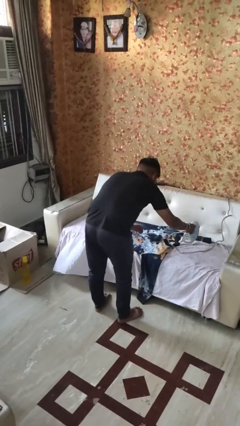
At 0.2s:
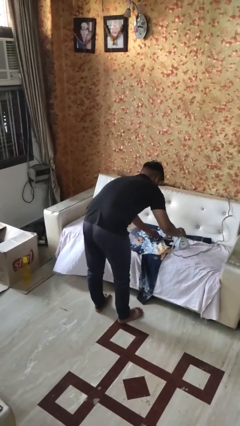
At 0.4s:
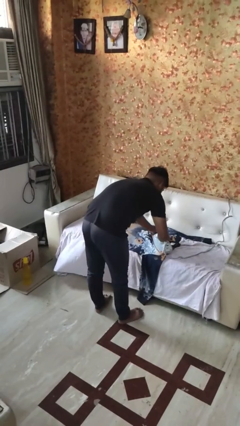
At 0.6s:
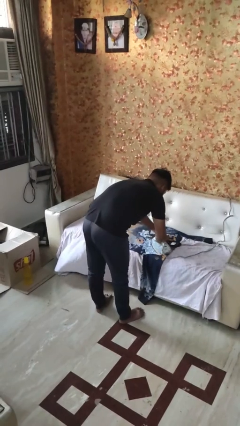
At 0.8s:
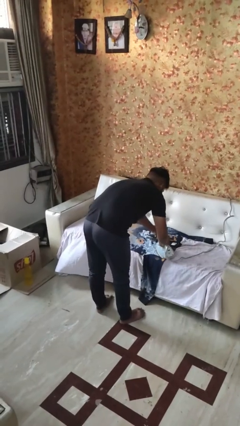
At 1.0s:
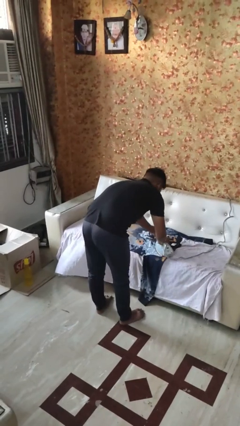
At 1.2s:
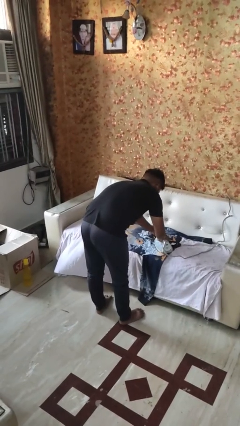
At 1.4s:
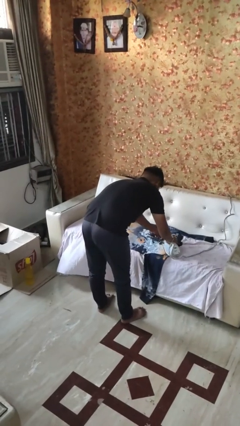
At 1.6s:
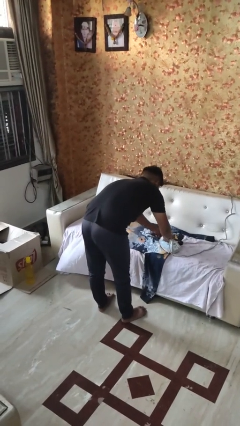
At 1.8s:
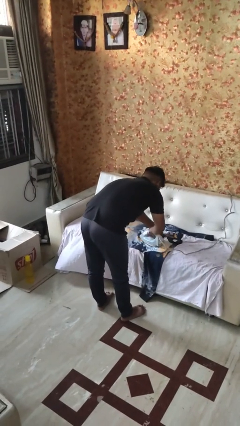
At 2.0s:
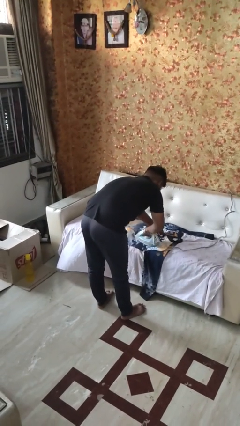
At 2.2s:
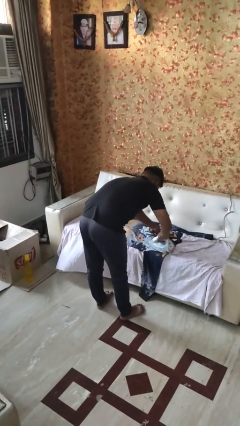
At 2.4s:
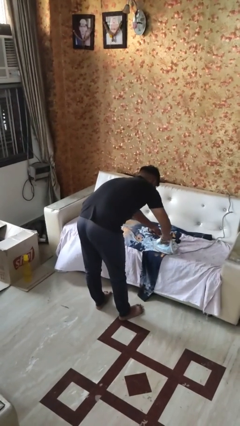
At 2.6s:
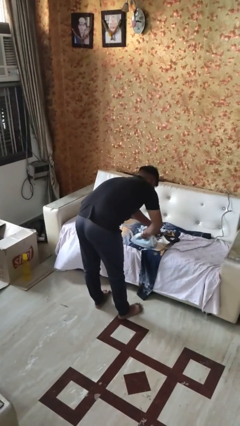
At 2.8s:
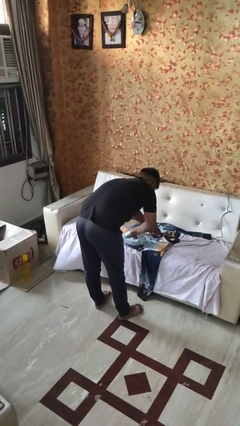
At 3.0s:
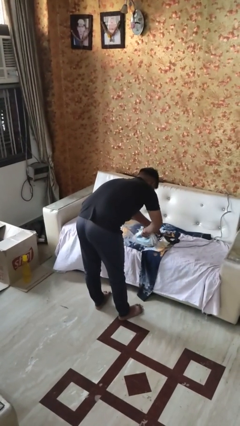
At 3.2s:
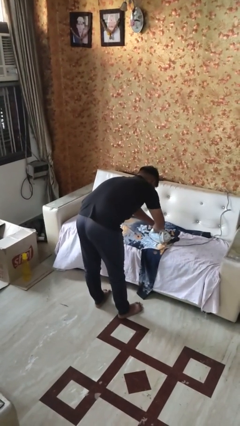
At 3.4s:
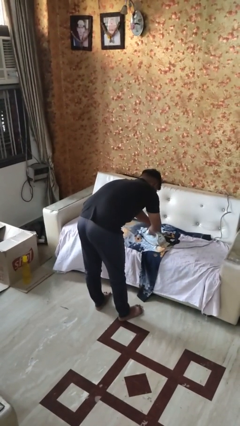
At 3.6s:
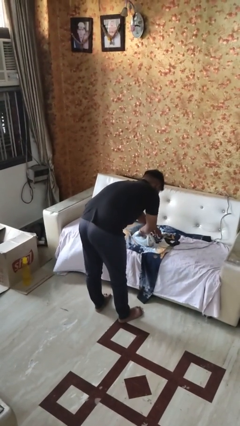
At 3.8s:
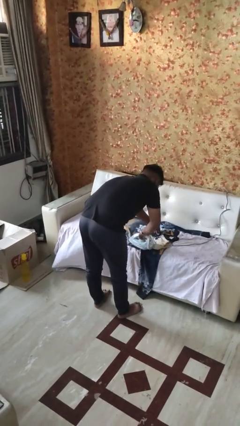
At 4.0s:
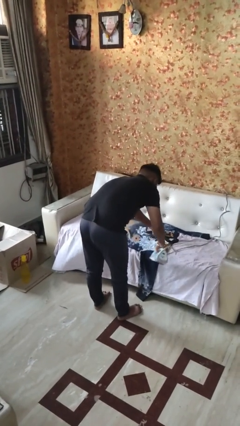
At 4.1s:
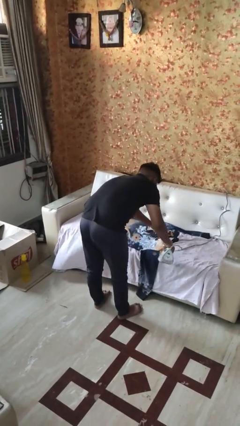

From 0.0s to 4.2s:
person irons clothes

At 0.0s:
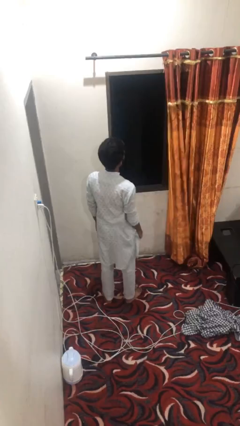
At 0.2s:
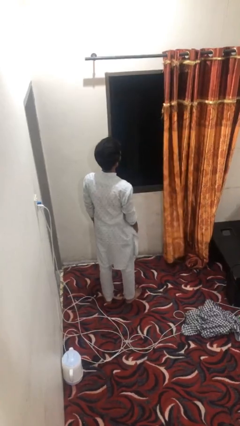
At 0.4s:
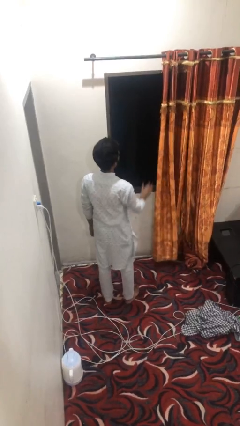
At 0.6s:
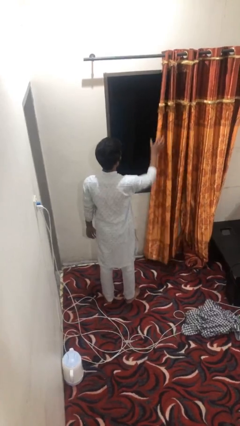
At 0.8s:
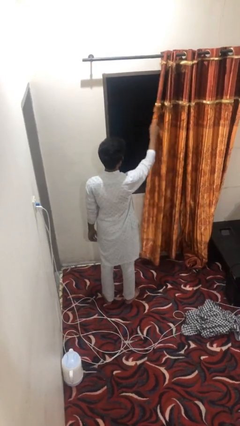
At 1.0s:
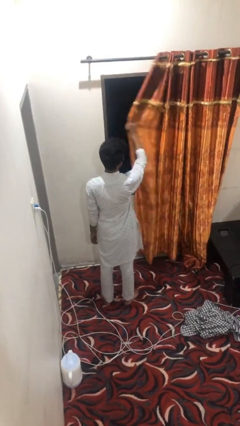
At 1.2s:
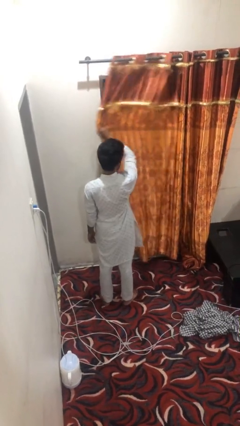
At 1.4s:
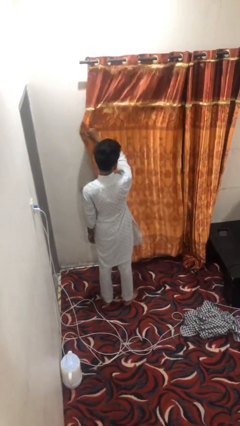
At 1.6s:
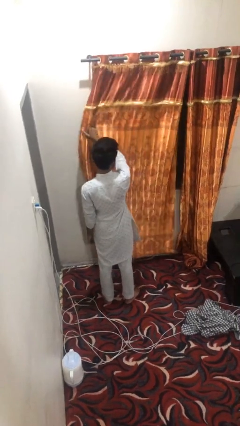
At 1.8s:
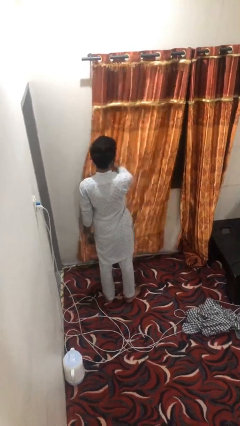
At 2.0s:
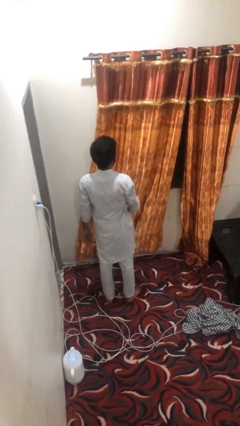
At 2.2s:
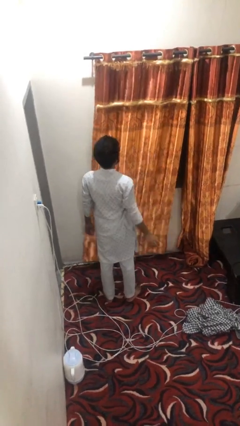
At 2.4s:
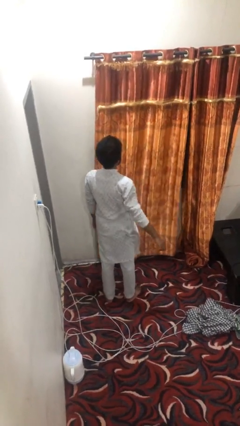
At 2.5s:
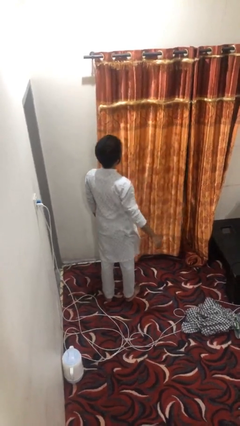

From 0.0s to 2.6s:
person closes curtains

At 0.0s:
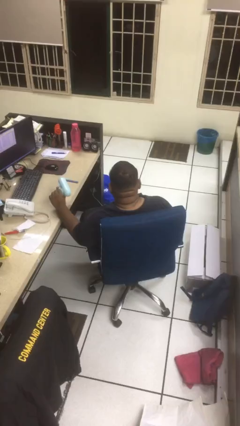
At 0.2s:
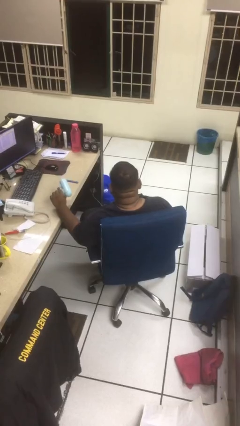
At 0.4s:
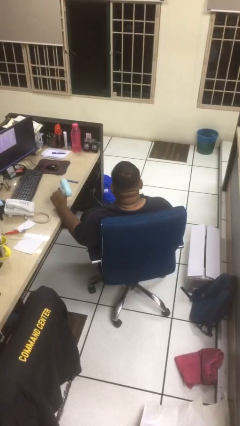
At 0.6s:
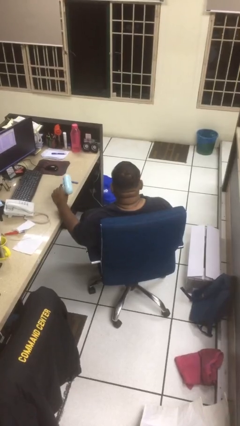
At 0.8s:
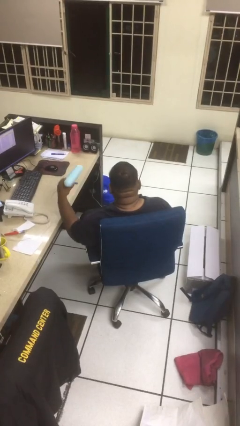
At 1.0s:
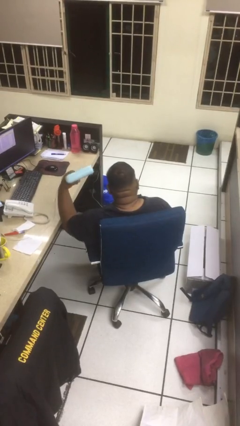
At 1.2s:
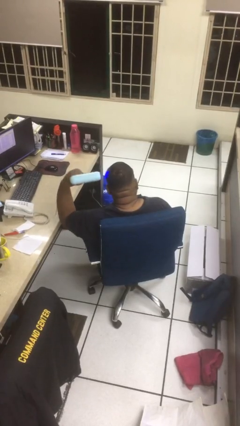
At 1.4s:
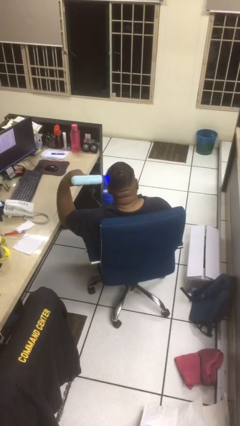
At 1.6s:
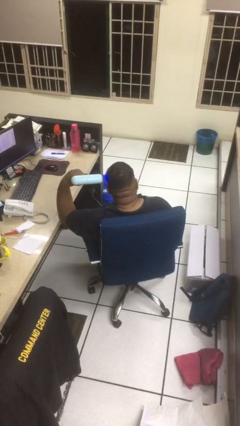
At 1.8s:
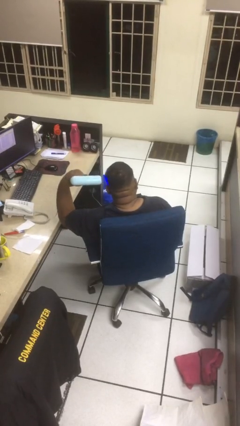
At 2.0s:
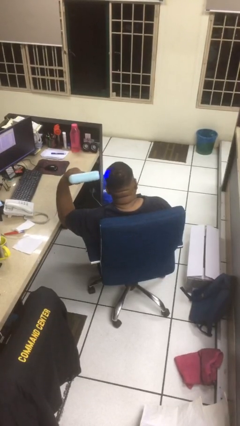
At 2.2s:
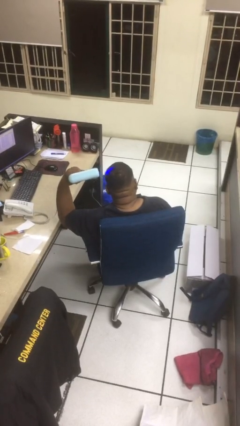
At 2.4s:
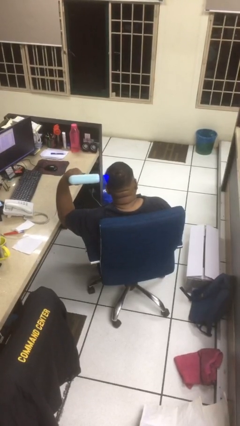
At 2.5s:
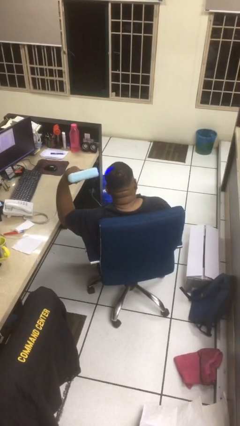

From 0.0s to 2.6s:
person dries hair with hairdryer

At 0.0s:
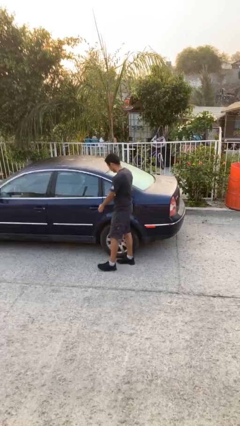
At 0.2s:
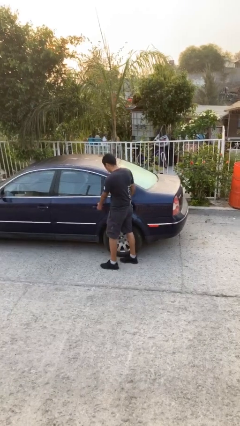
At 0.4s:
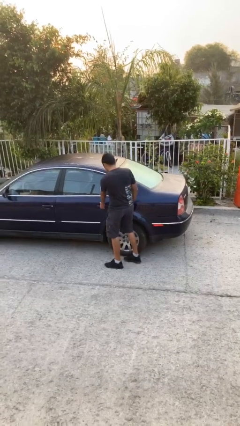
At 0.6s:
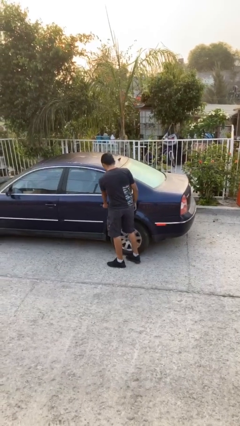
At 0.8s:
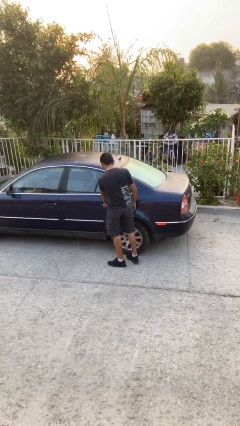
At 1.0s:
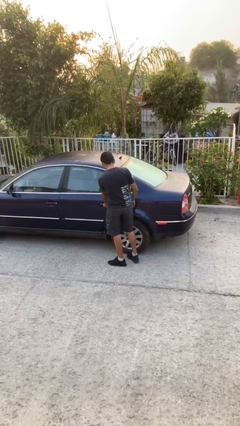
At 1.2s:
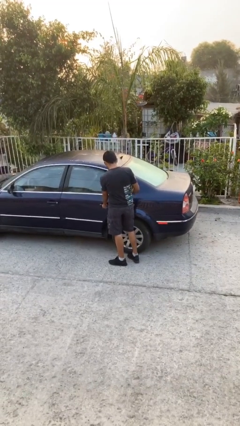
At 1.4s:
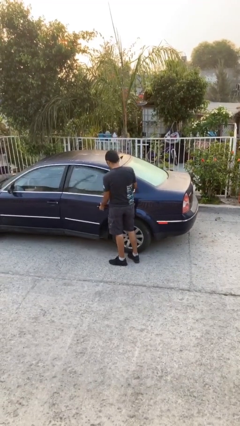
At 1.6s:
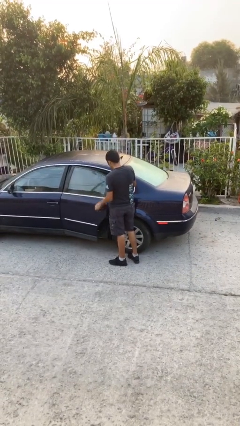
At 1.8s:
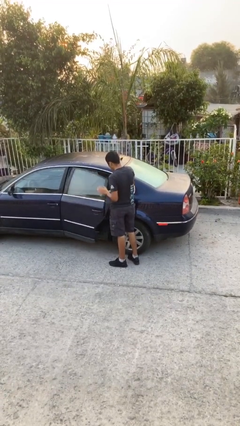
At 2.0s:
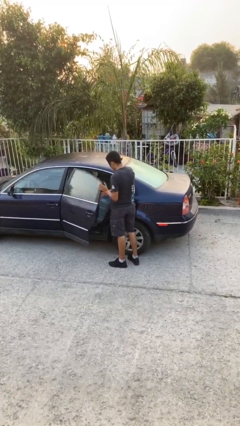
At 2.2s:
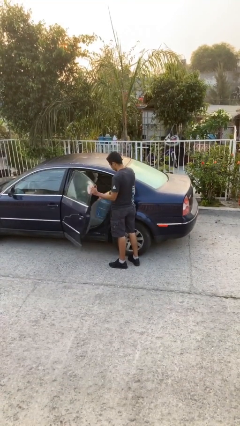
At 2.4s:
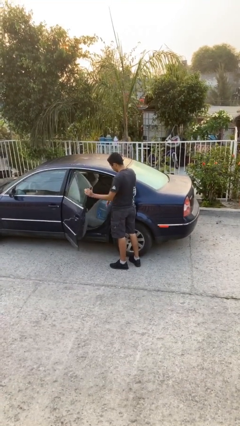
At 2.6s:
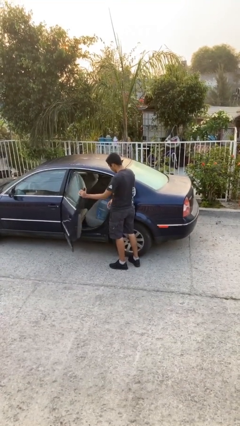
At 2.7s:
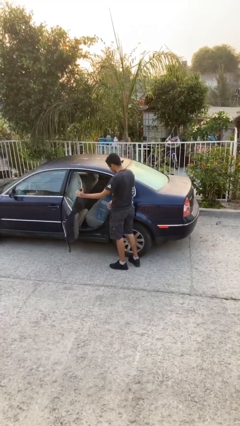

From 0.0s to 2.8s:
person opens car door

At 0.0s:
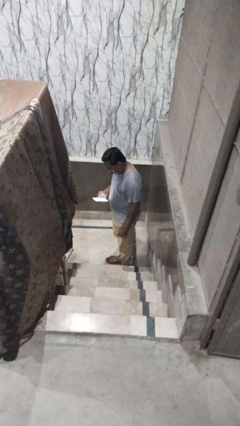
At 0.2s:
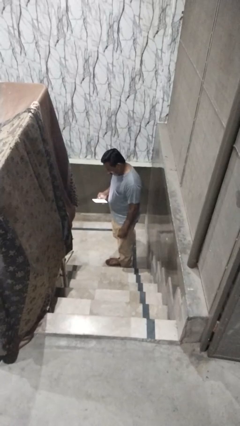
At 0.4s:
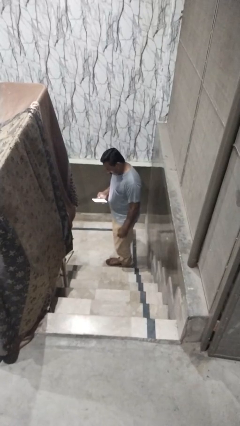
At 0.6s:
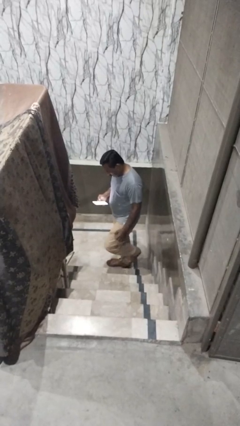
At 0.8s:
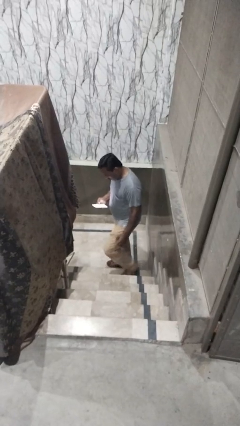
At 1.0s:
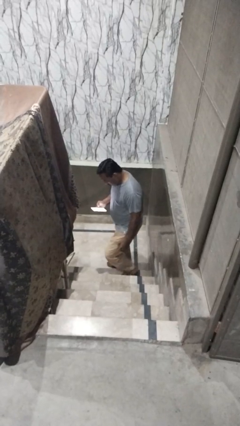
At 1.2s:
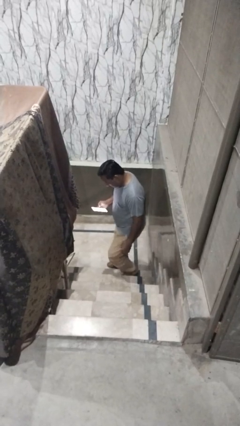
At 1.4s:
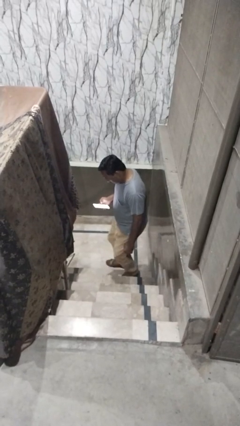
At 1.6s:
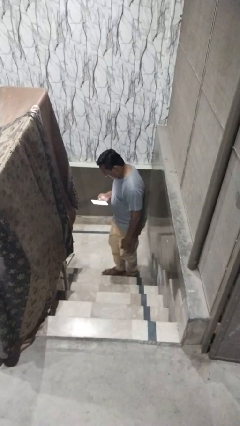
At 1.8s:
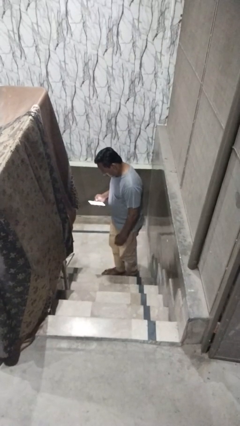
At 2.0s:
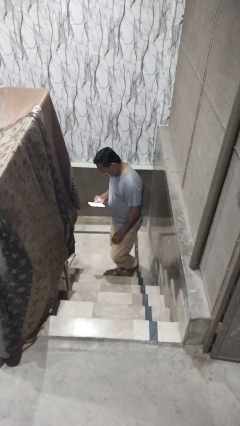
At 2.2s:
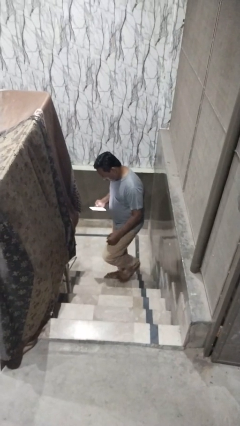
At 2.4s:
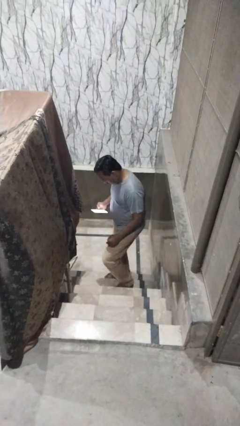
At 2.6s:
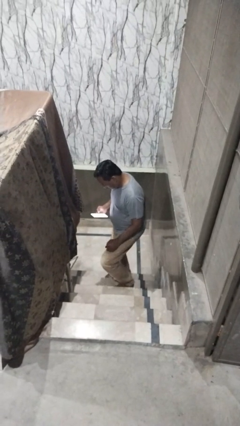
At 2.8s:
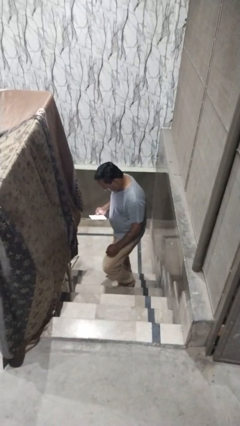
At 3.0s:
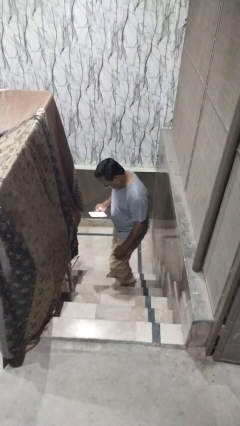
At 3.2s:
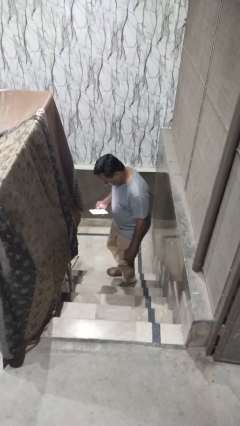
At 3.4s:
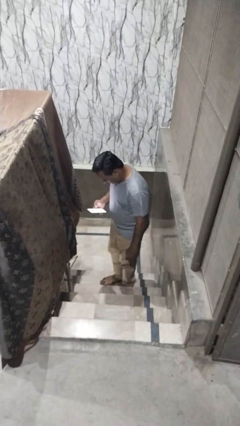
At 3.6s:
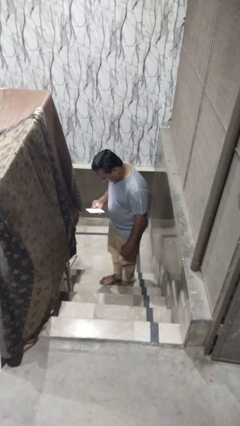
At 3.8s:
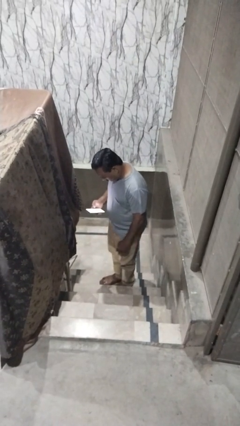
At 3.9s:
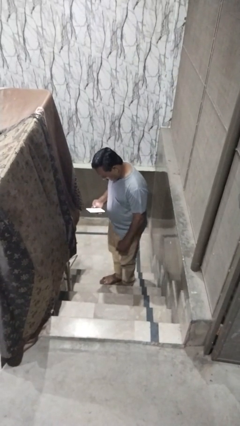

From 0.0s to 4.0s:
person climbs up stairs

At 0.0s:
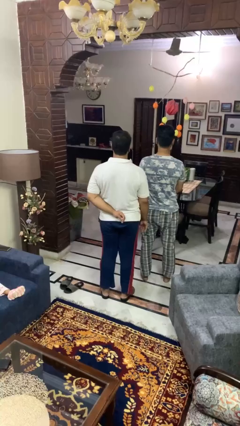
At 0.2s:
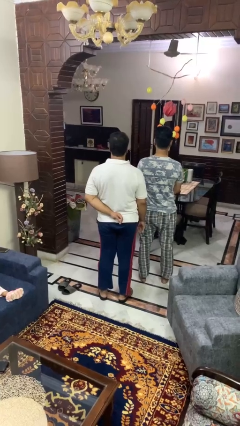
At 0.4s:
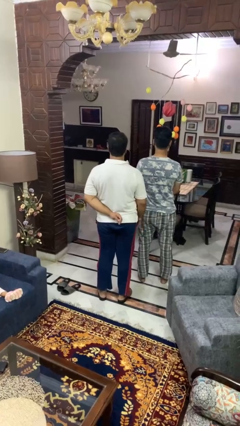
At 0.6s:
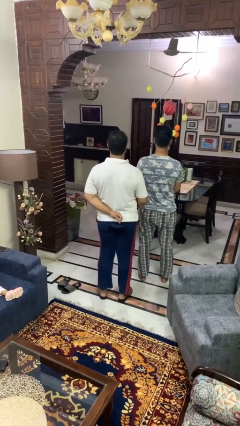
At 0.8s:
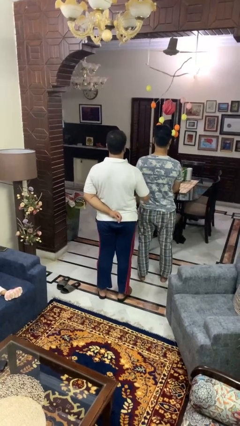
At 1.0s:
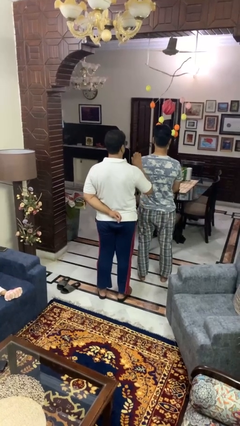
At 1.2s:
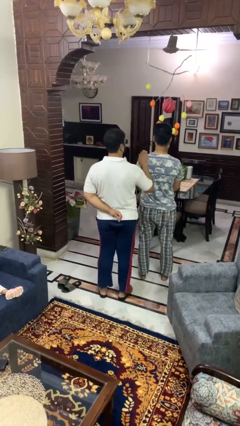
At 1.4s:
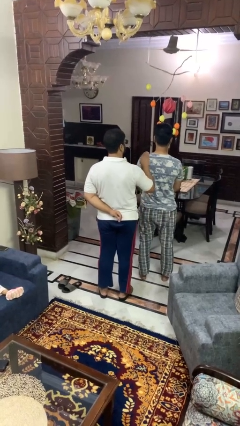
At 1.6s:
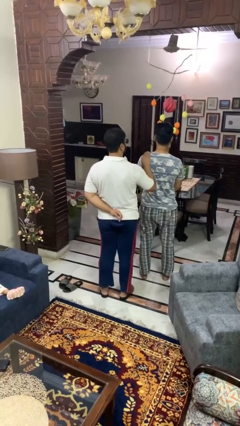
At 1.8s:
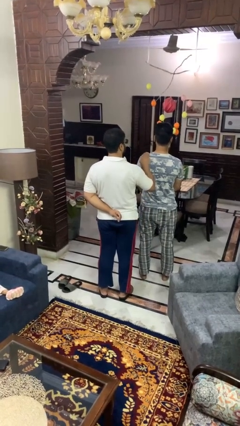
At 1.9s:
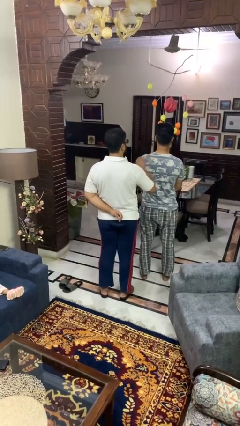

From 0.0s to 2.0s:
person pounds shoulders of person
